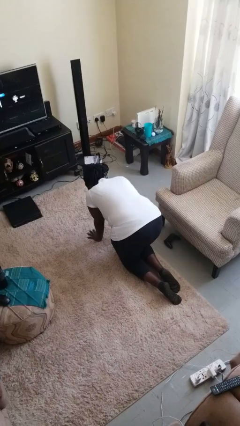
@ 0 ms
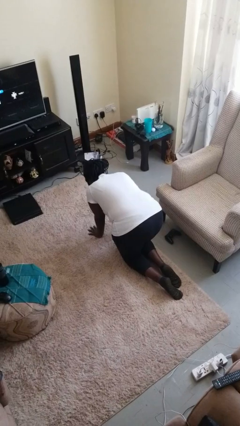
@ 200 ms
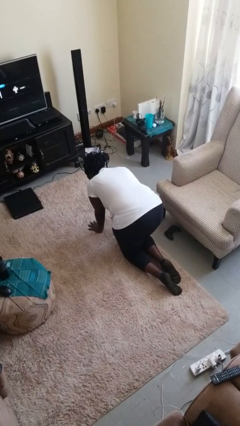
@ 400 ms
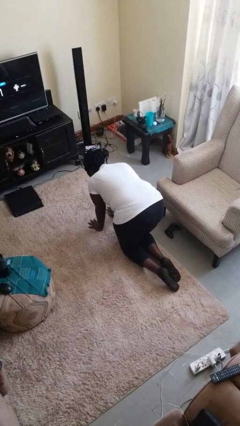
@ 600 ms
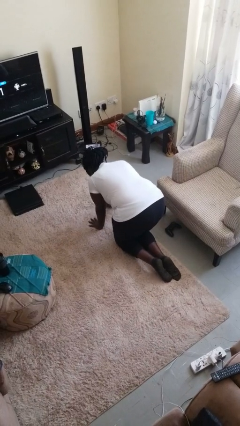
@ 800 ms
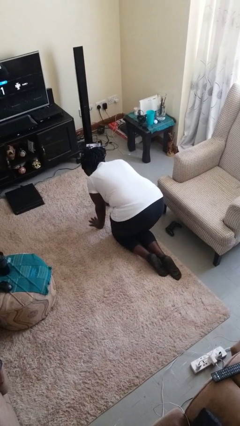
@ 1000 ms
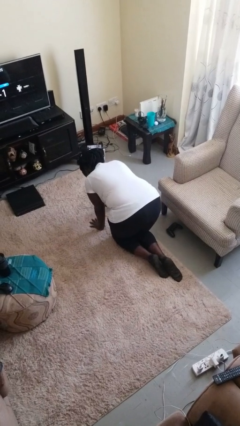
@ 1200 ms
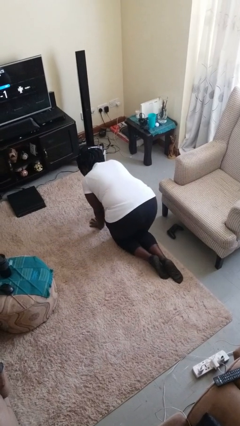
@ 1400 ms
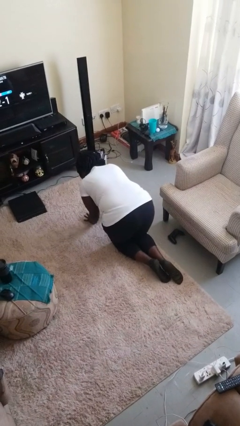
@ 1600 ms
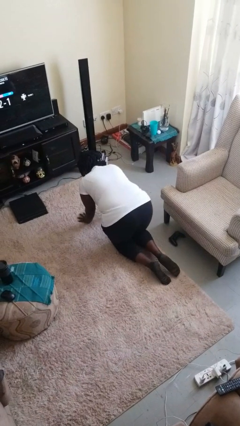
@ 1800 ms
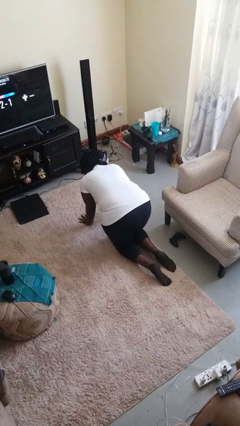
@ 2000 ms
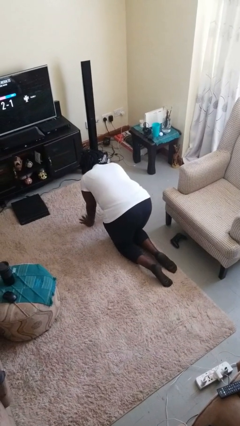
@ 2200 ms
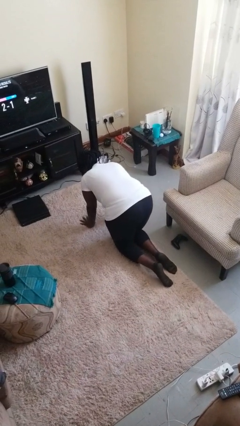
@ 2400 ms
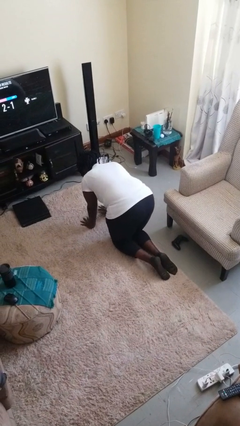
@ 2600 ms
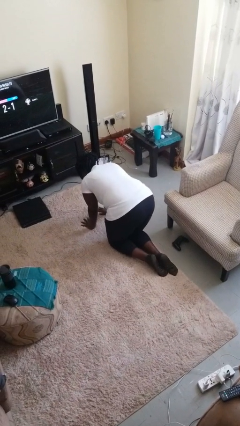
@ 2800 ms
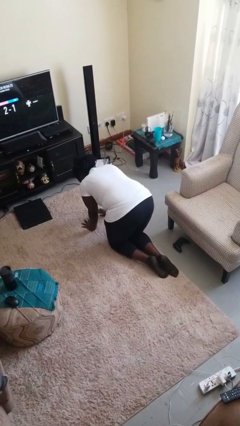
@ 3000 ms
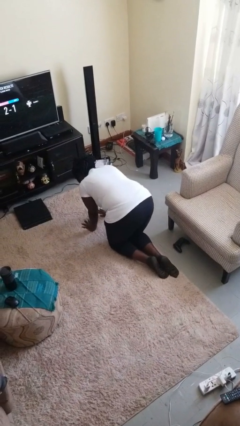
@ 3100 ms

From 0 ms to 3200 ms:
person crawls

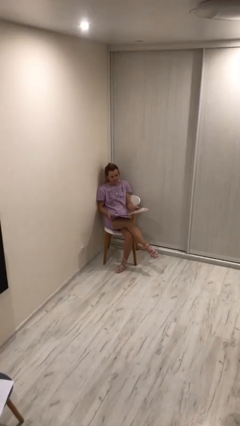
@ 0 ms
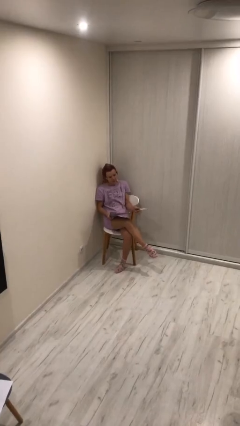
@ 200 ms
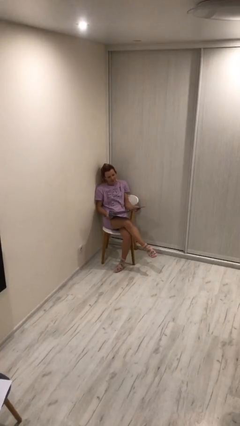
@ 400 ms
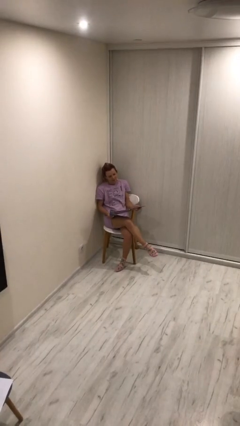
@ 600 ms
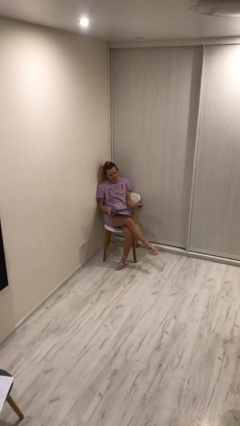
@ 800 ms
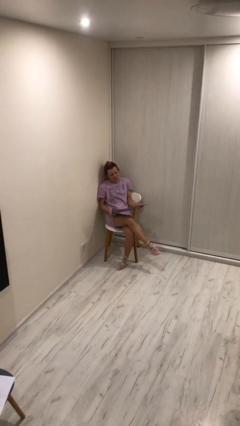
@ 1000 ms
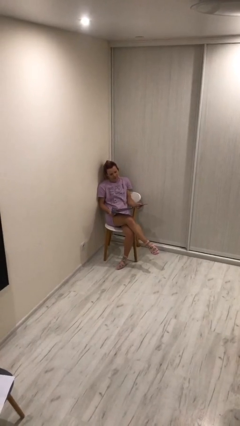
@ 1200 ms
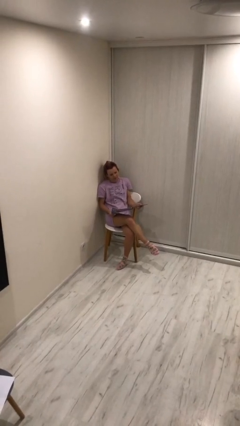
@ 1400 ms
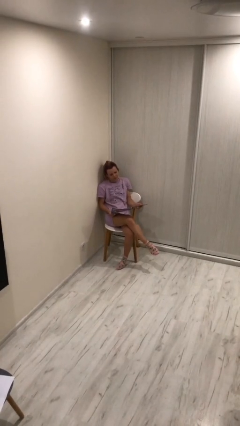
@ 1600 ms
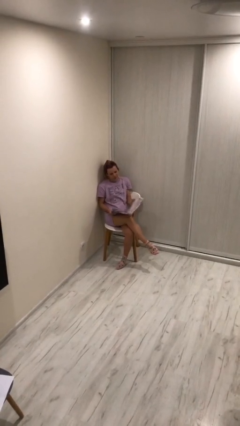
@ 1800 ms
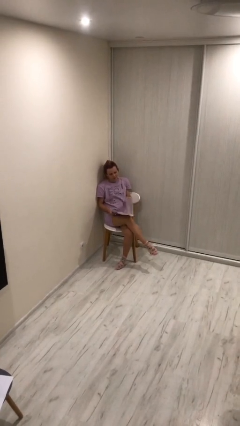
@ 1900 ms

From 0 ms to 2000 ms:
person reads magazine

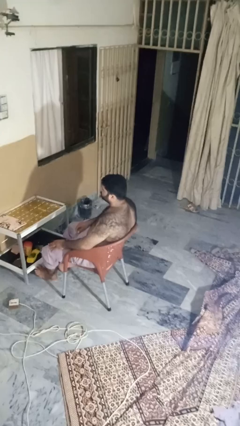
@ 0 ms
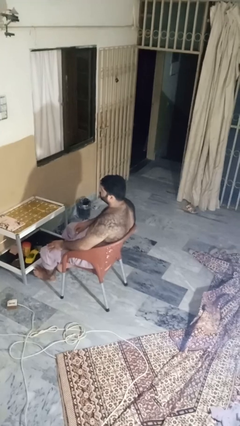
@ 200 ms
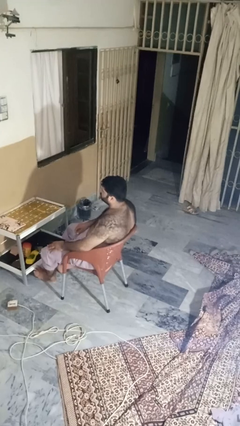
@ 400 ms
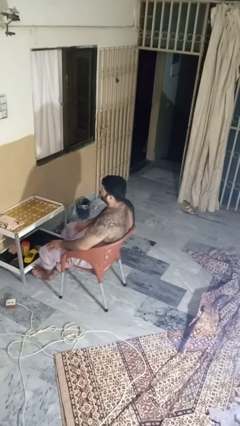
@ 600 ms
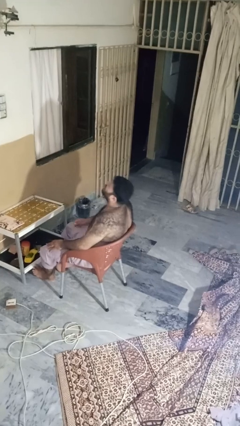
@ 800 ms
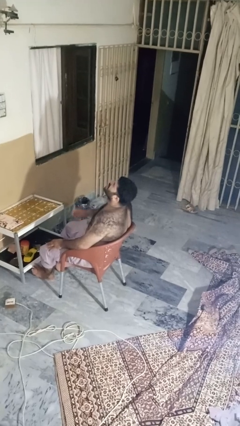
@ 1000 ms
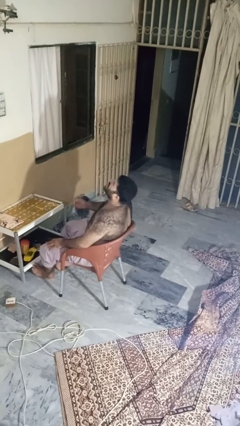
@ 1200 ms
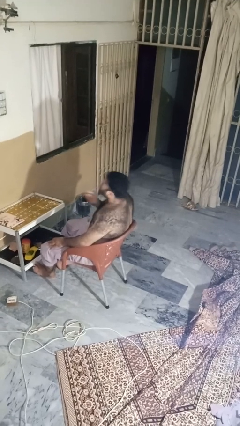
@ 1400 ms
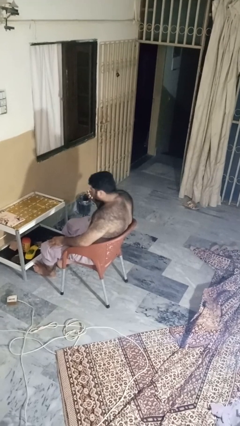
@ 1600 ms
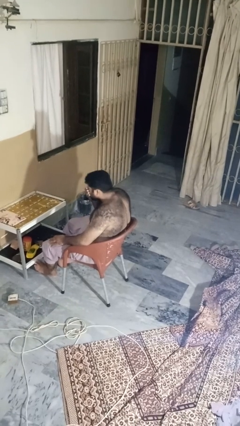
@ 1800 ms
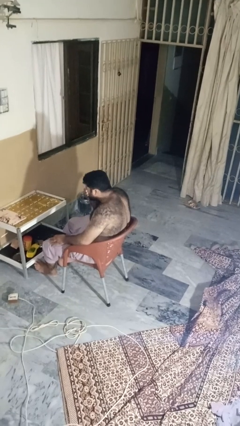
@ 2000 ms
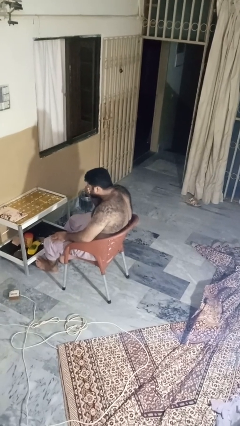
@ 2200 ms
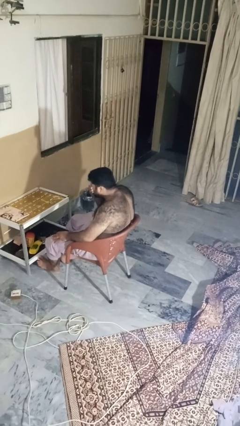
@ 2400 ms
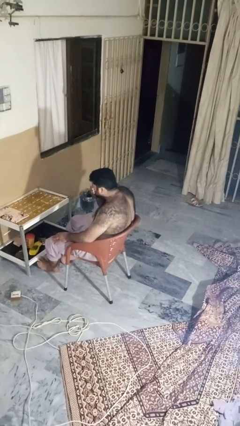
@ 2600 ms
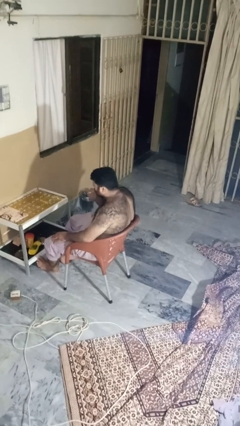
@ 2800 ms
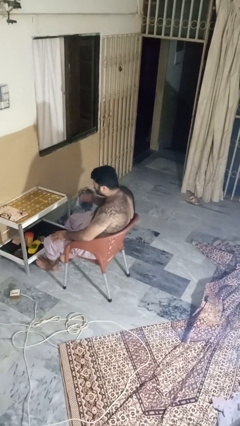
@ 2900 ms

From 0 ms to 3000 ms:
person sneezes into hand

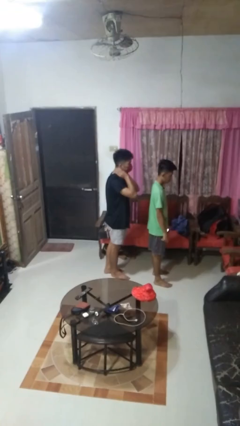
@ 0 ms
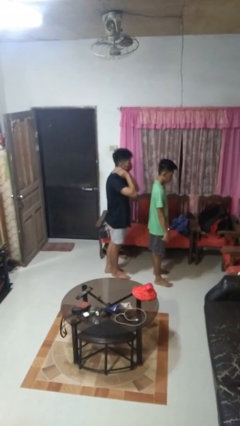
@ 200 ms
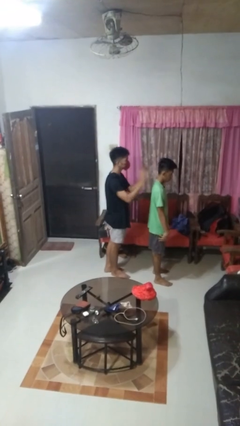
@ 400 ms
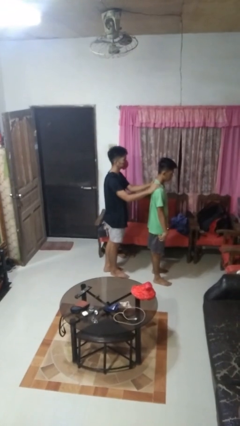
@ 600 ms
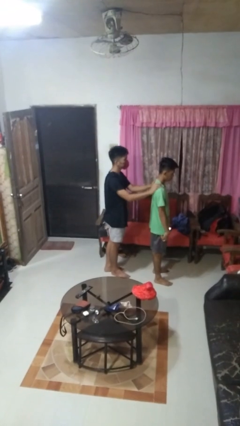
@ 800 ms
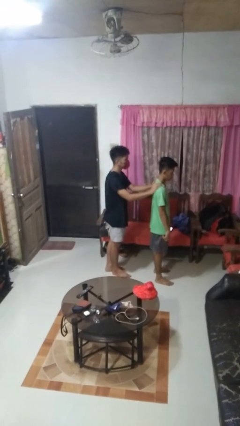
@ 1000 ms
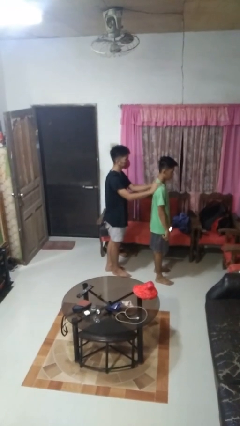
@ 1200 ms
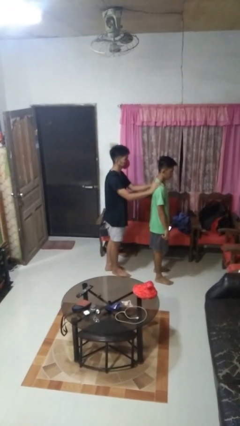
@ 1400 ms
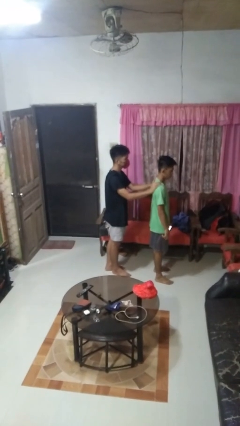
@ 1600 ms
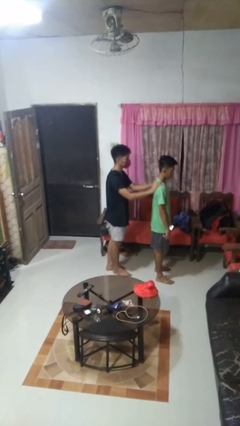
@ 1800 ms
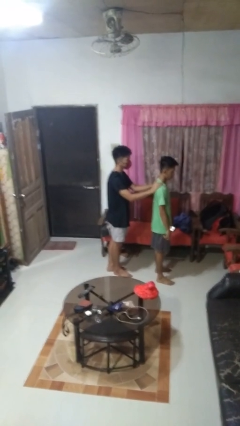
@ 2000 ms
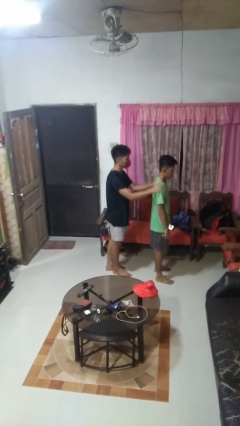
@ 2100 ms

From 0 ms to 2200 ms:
person grabs person by shoulder

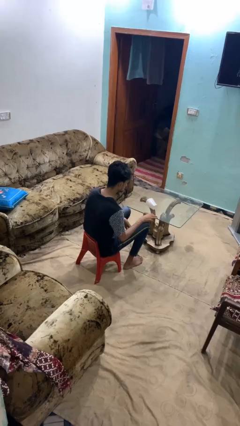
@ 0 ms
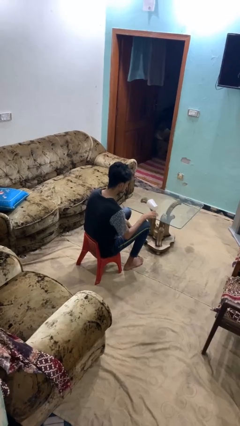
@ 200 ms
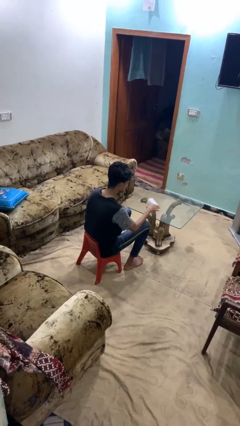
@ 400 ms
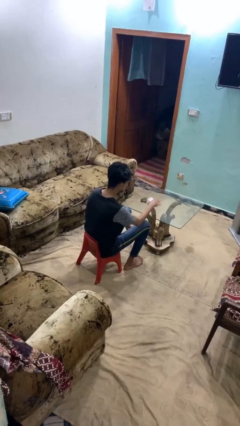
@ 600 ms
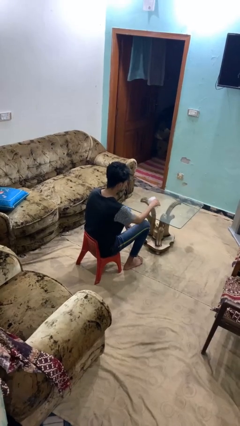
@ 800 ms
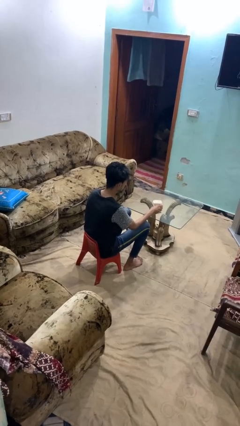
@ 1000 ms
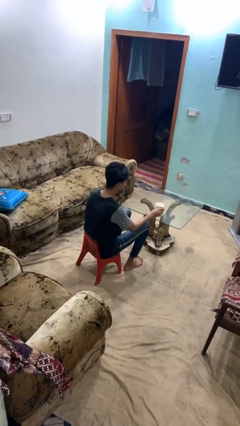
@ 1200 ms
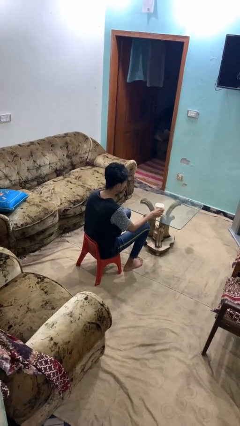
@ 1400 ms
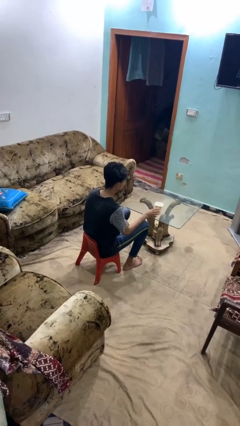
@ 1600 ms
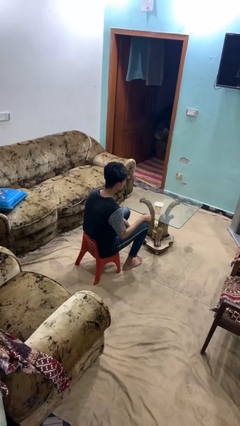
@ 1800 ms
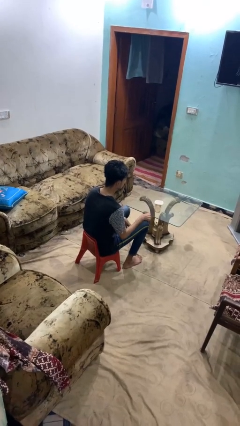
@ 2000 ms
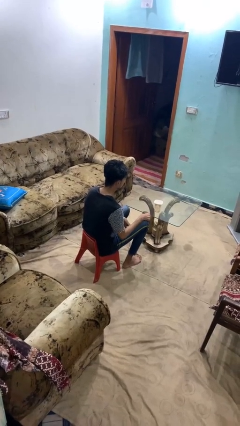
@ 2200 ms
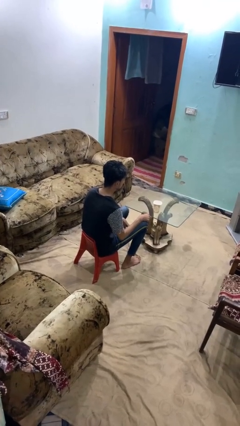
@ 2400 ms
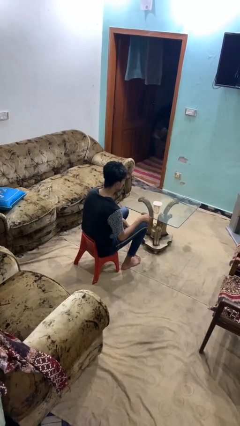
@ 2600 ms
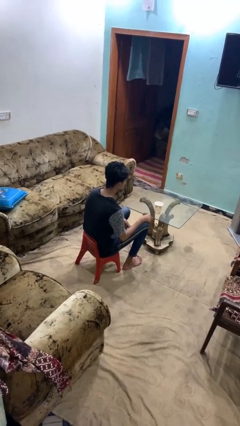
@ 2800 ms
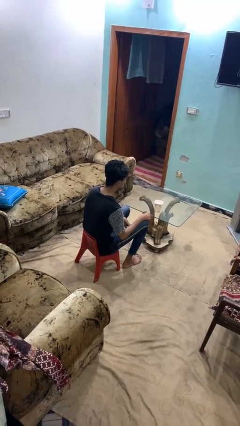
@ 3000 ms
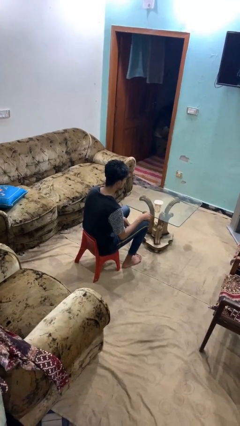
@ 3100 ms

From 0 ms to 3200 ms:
person sets upright glass

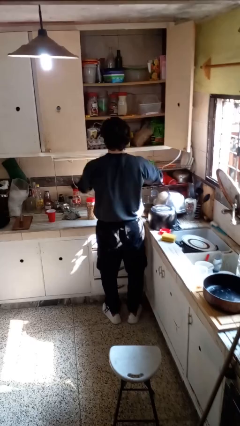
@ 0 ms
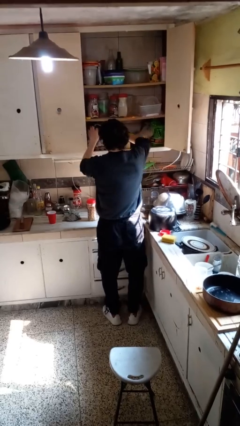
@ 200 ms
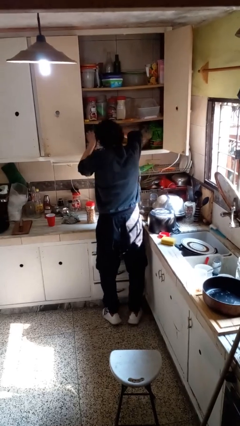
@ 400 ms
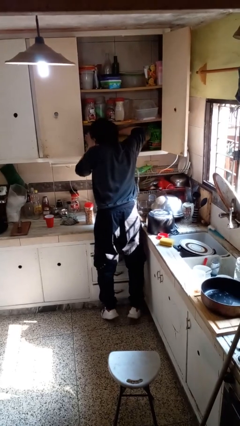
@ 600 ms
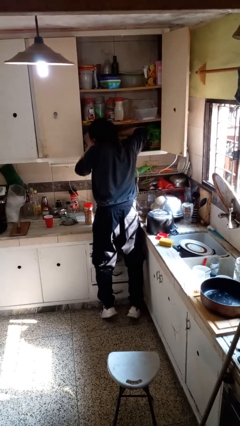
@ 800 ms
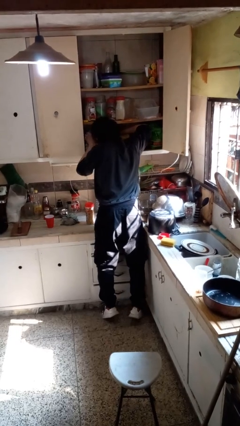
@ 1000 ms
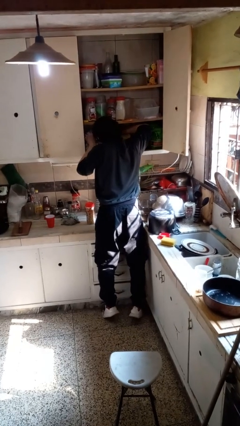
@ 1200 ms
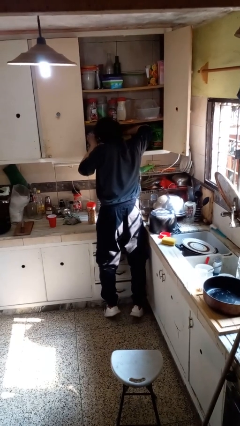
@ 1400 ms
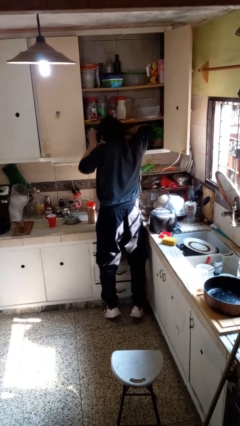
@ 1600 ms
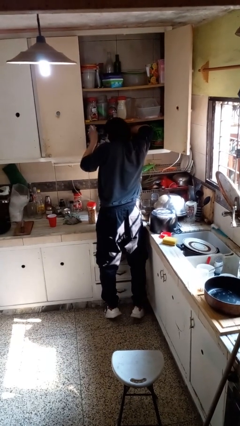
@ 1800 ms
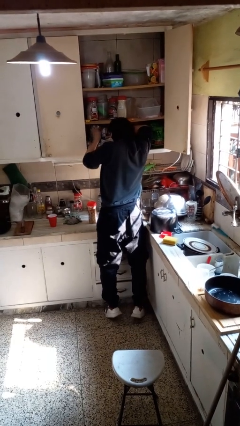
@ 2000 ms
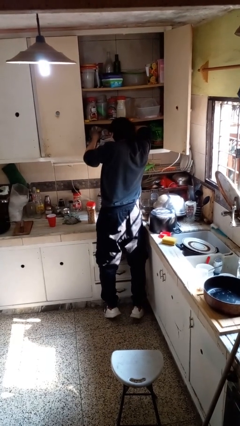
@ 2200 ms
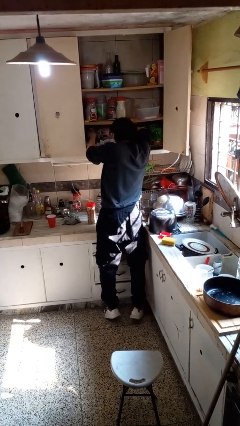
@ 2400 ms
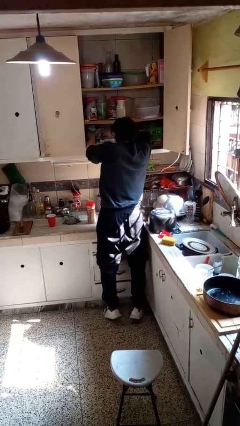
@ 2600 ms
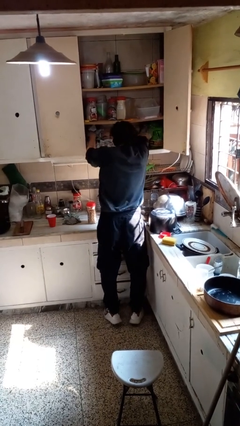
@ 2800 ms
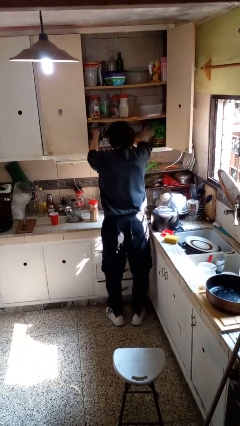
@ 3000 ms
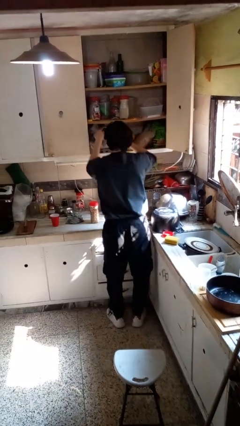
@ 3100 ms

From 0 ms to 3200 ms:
person searches in cabinet
